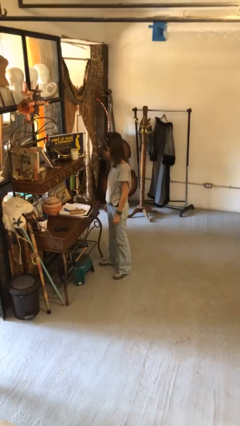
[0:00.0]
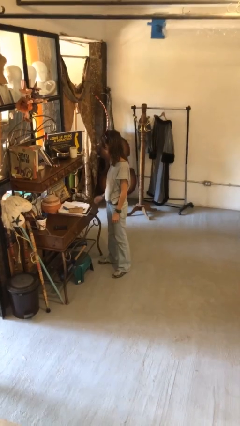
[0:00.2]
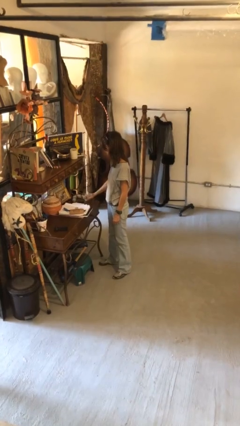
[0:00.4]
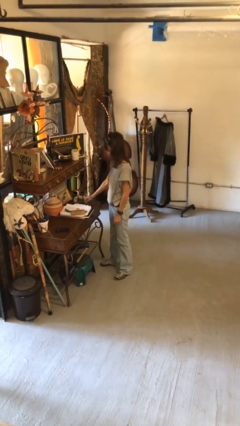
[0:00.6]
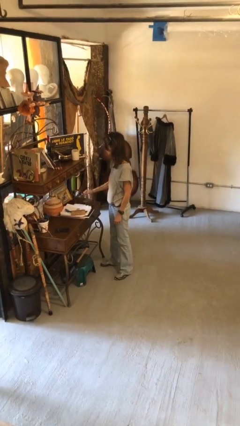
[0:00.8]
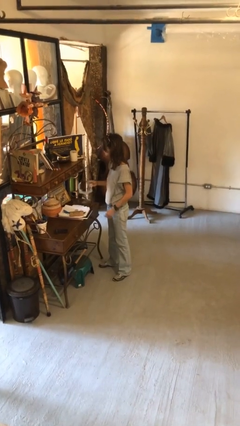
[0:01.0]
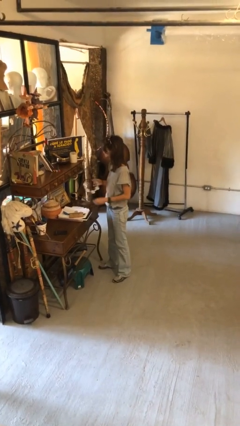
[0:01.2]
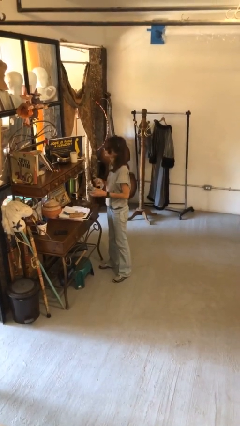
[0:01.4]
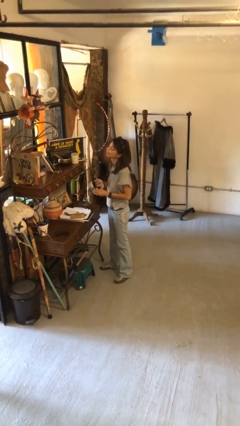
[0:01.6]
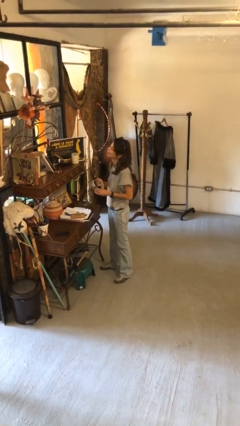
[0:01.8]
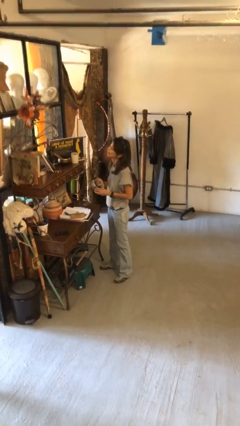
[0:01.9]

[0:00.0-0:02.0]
person picks up object from countertop

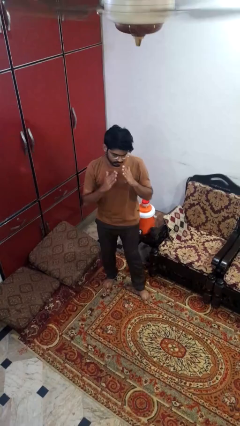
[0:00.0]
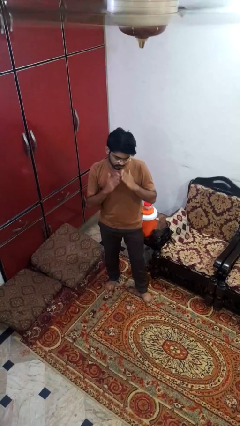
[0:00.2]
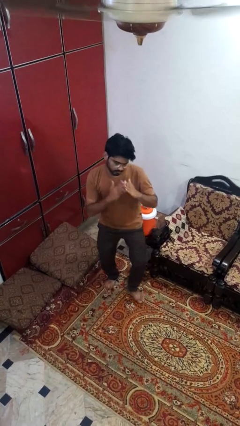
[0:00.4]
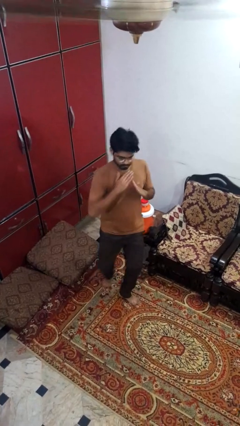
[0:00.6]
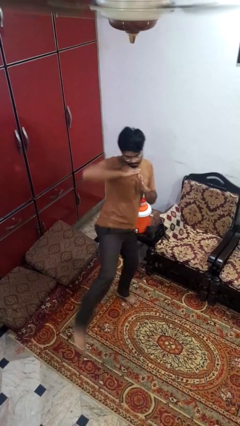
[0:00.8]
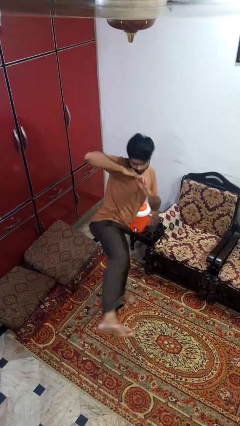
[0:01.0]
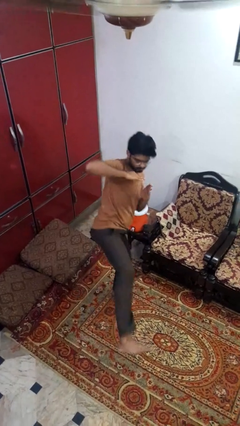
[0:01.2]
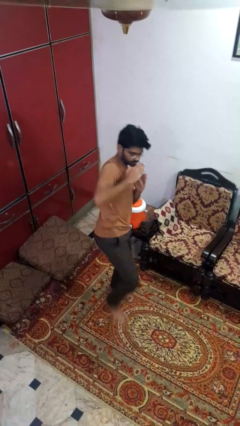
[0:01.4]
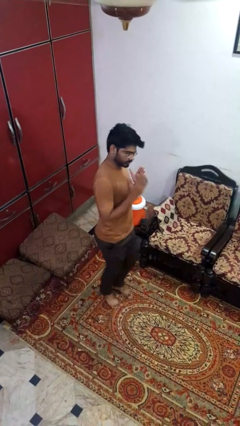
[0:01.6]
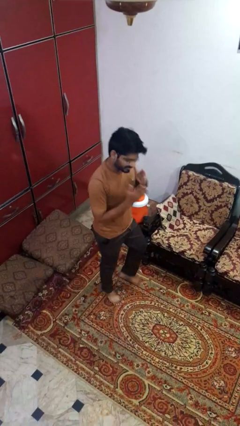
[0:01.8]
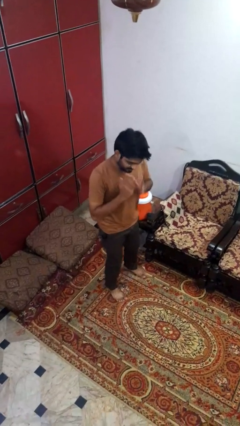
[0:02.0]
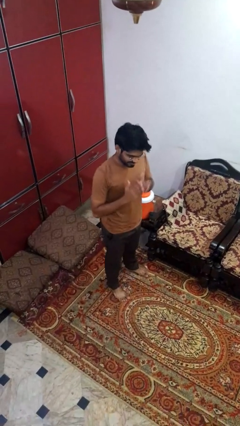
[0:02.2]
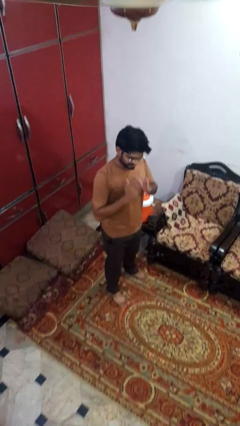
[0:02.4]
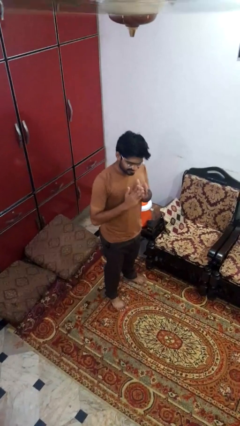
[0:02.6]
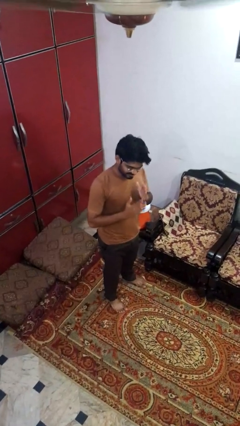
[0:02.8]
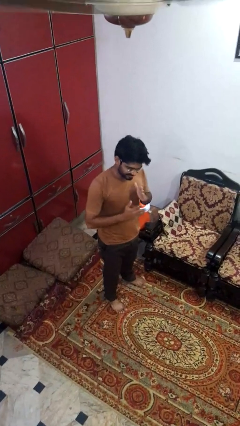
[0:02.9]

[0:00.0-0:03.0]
person karate kicks

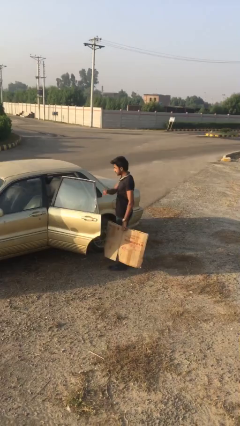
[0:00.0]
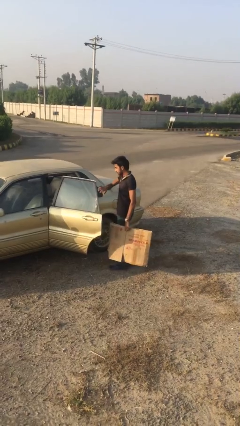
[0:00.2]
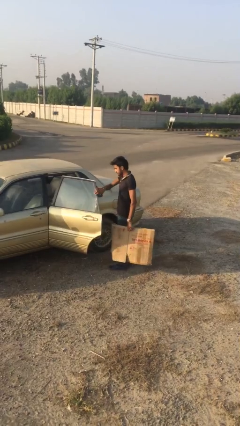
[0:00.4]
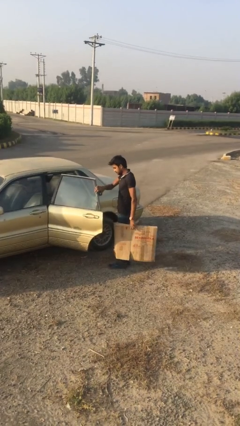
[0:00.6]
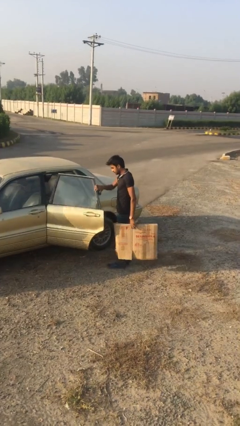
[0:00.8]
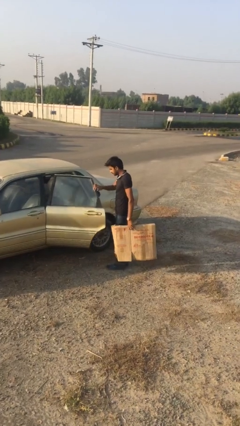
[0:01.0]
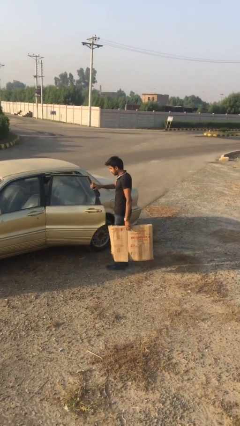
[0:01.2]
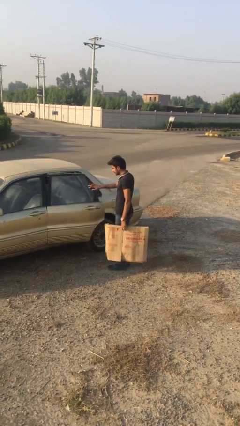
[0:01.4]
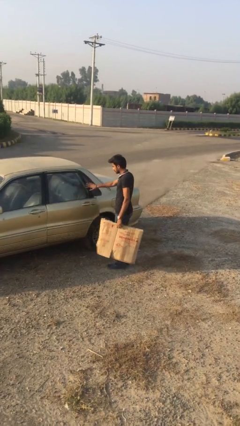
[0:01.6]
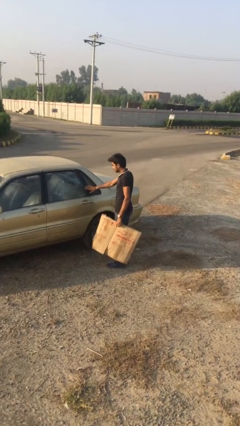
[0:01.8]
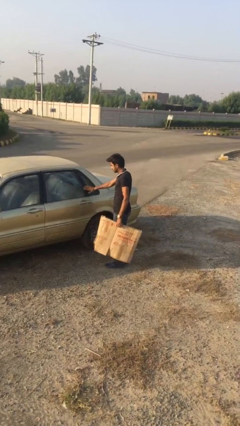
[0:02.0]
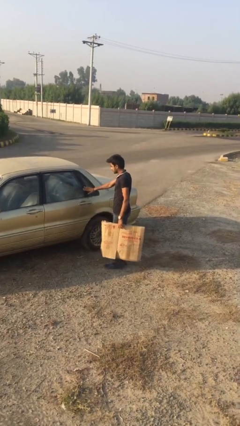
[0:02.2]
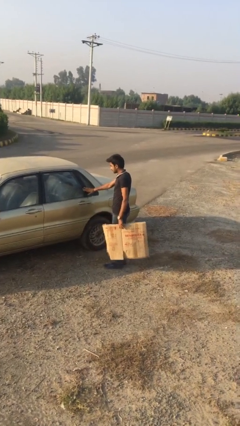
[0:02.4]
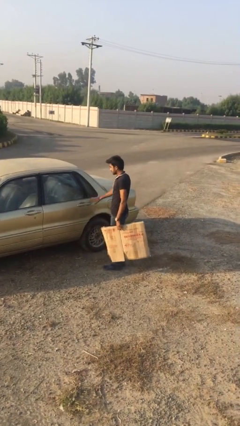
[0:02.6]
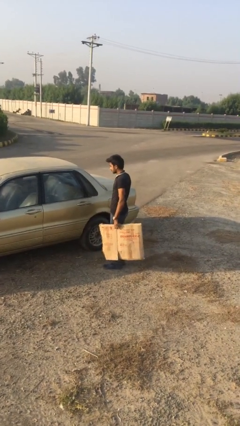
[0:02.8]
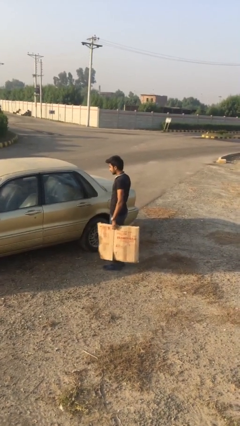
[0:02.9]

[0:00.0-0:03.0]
person closes car door

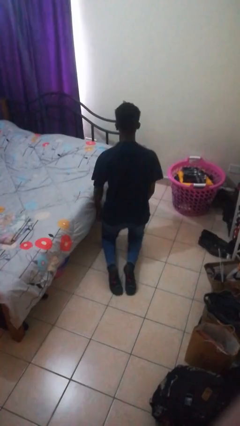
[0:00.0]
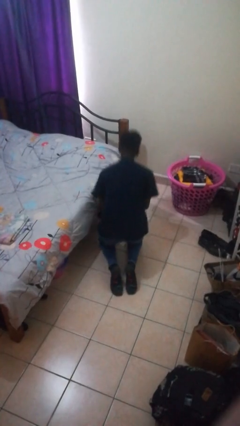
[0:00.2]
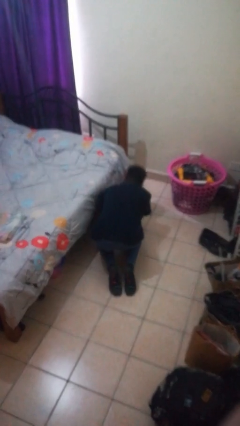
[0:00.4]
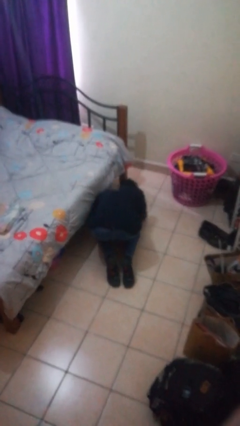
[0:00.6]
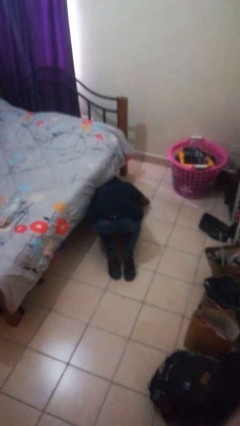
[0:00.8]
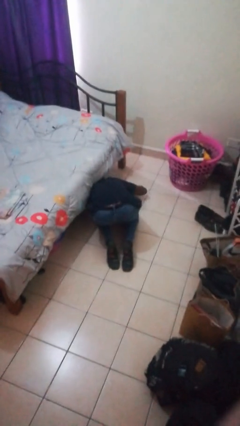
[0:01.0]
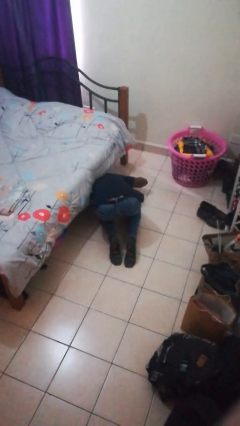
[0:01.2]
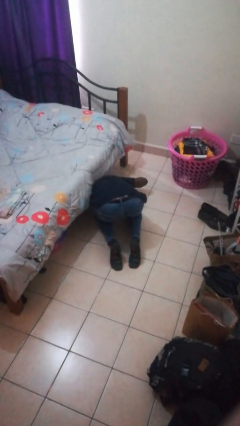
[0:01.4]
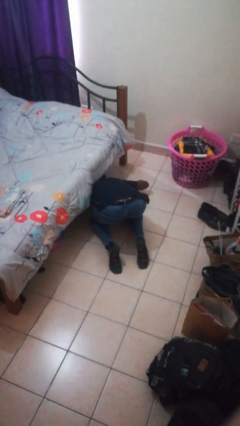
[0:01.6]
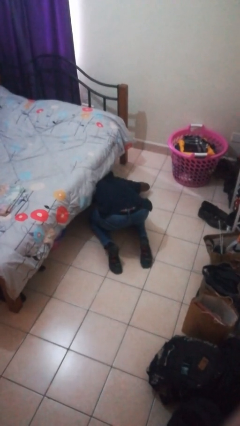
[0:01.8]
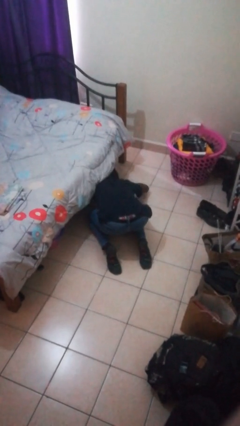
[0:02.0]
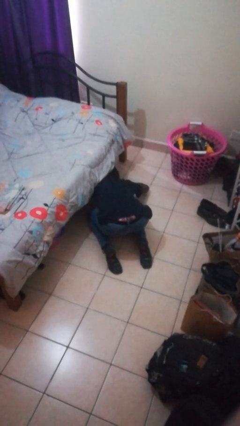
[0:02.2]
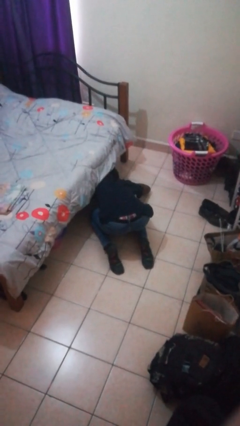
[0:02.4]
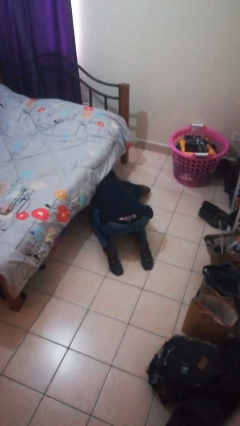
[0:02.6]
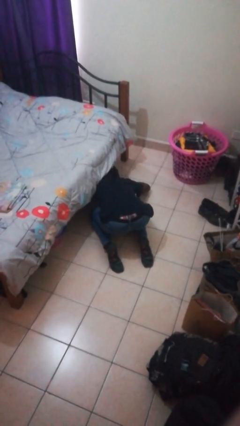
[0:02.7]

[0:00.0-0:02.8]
person searches under bed

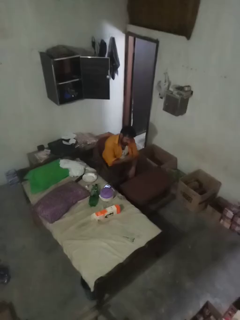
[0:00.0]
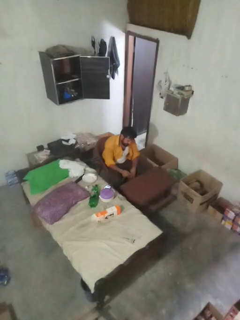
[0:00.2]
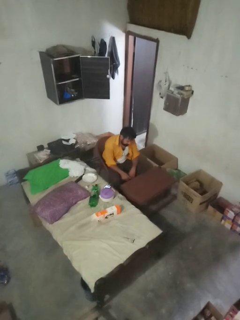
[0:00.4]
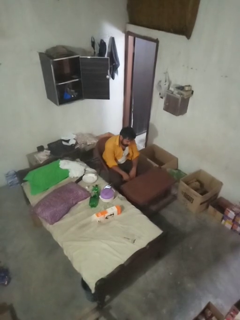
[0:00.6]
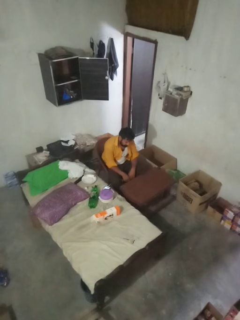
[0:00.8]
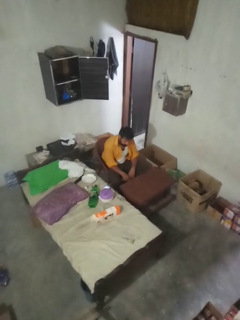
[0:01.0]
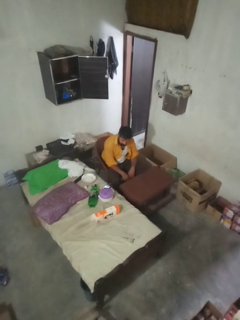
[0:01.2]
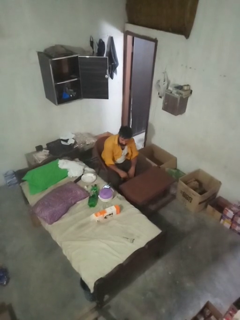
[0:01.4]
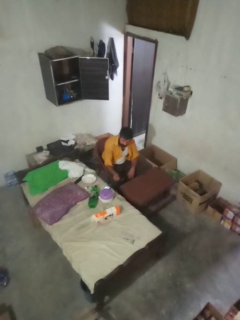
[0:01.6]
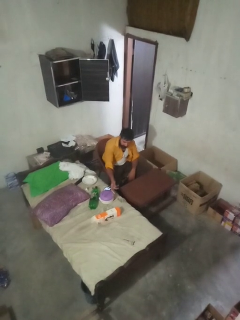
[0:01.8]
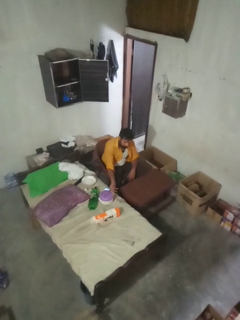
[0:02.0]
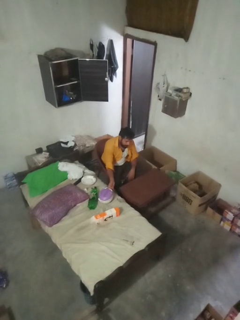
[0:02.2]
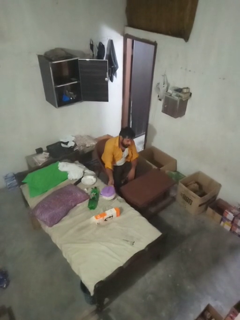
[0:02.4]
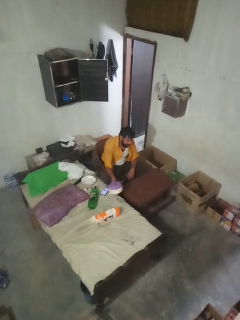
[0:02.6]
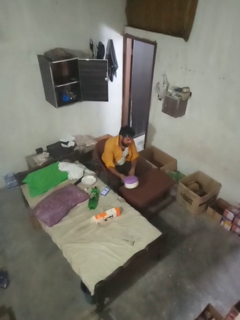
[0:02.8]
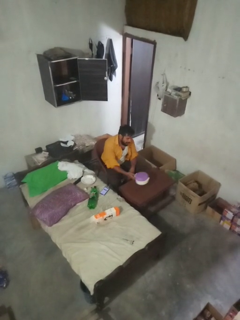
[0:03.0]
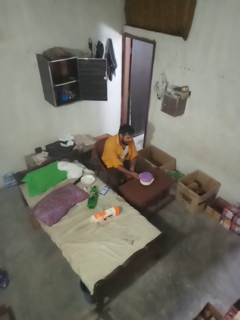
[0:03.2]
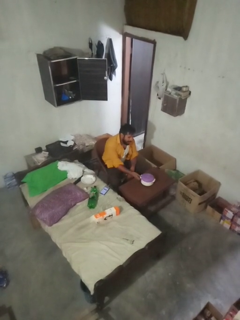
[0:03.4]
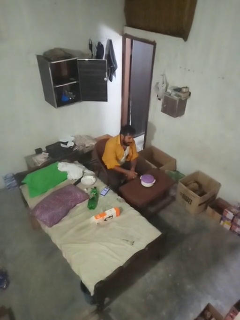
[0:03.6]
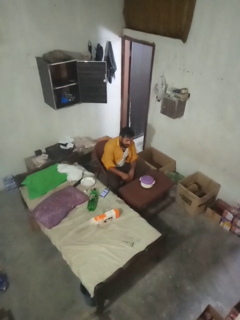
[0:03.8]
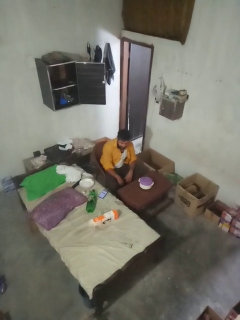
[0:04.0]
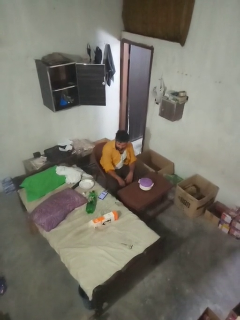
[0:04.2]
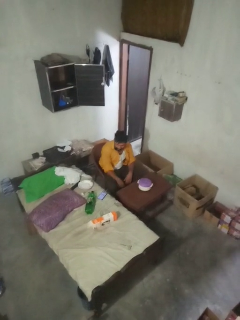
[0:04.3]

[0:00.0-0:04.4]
person sets table

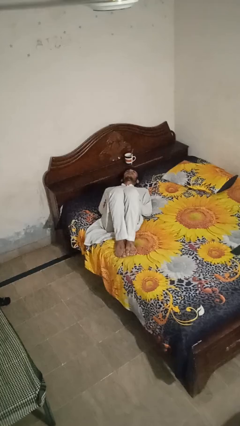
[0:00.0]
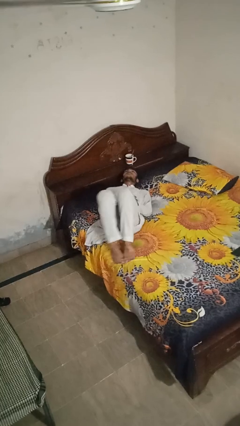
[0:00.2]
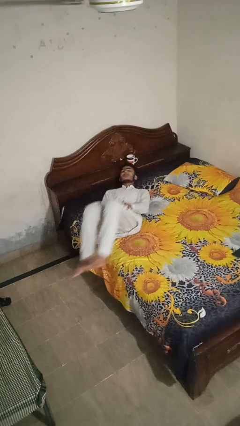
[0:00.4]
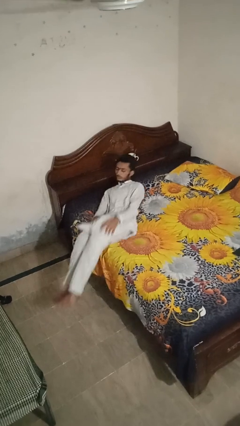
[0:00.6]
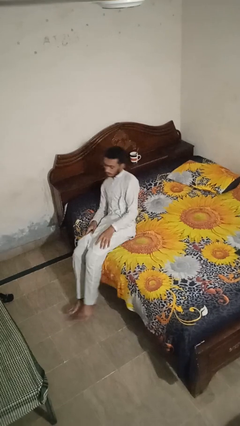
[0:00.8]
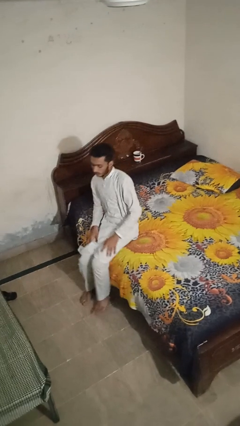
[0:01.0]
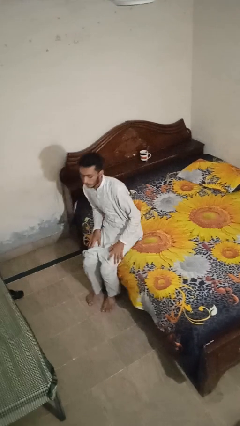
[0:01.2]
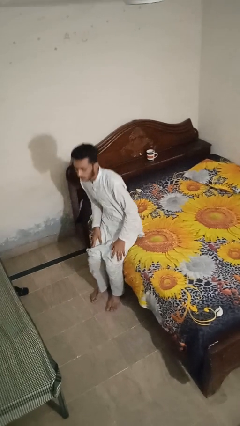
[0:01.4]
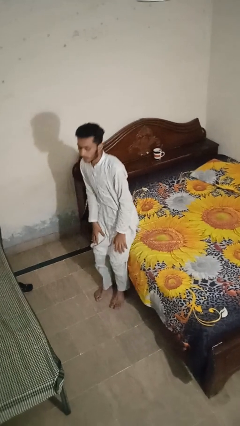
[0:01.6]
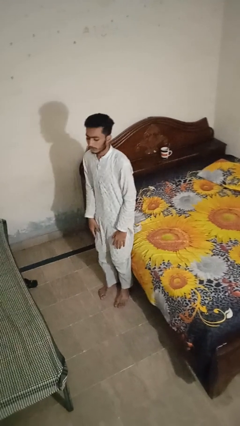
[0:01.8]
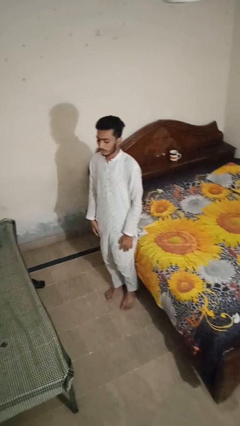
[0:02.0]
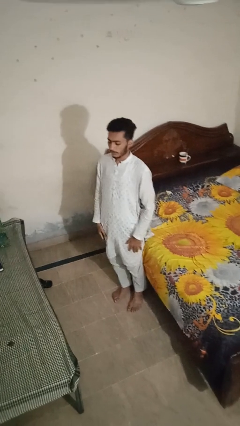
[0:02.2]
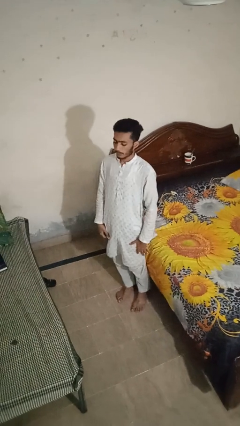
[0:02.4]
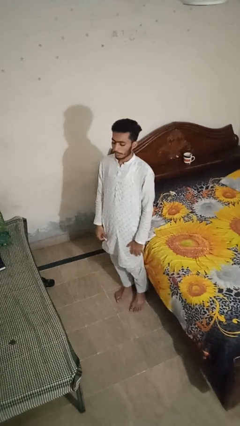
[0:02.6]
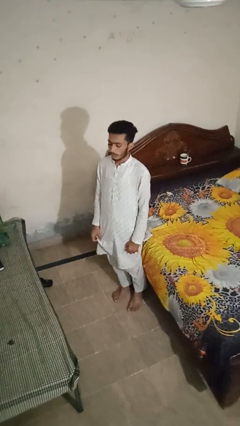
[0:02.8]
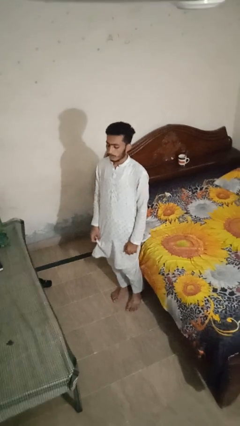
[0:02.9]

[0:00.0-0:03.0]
person stands up

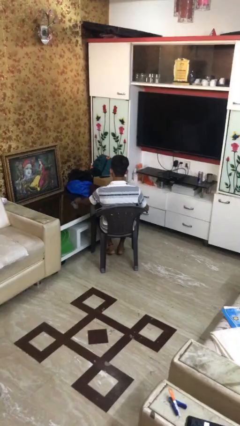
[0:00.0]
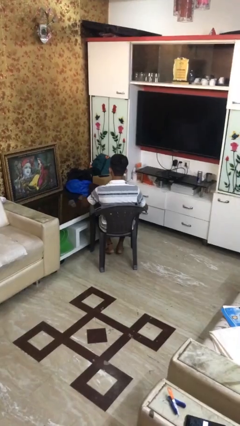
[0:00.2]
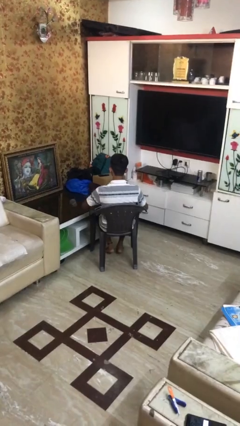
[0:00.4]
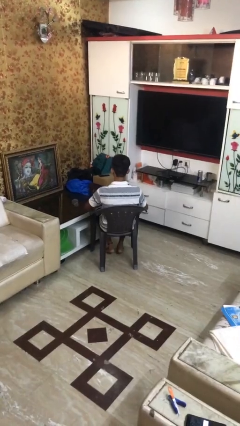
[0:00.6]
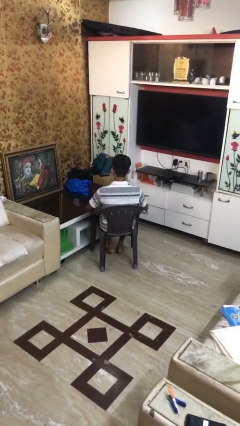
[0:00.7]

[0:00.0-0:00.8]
person knocks over glass
